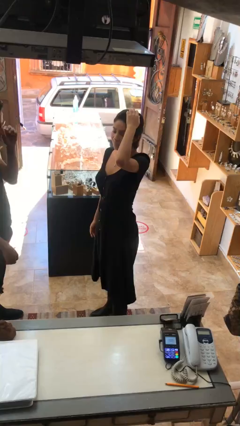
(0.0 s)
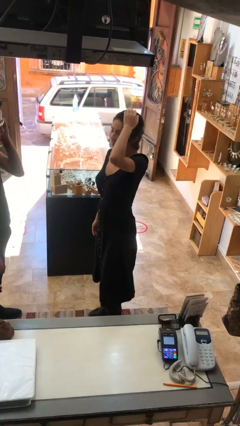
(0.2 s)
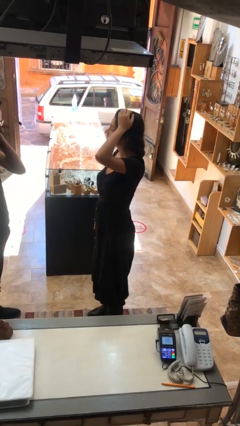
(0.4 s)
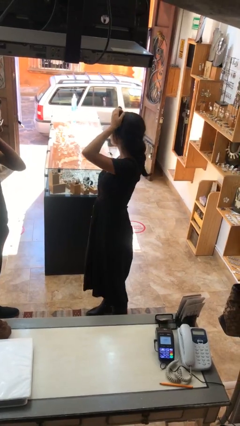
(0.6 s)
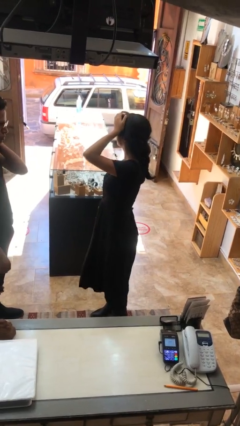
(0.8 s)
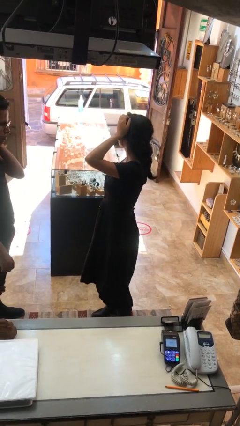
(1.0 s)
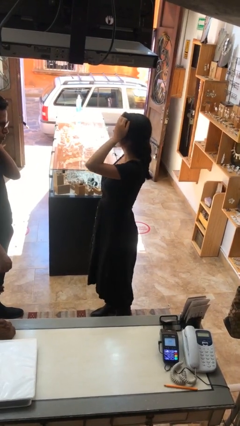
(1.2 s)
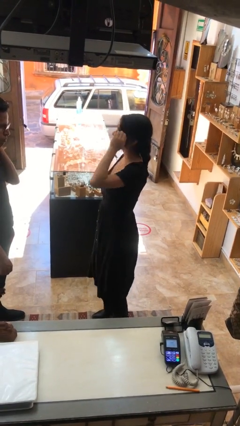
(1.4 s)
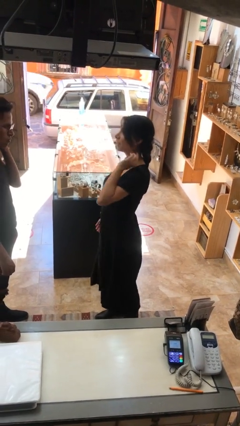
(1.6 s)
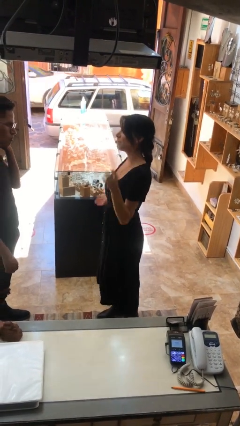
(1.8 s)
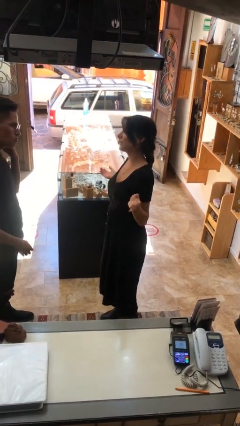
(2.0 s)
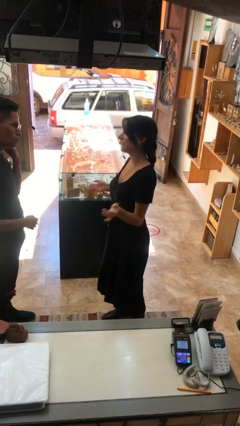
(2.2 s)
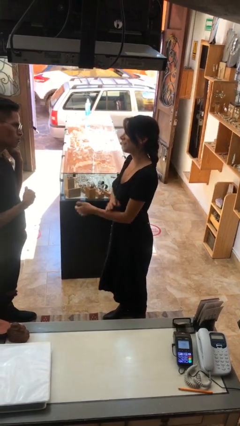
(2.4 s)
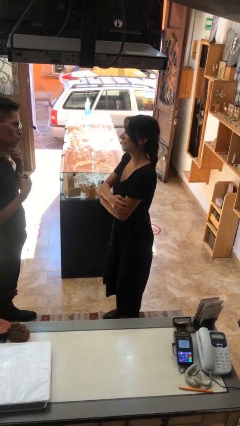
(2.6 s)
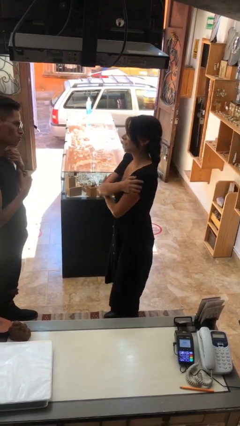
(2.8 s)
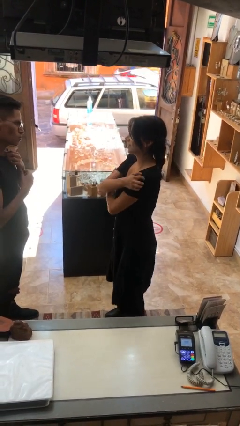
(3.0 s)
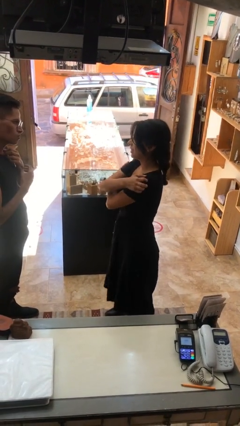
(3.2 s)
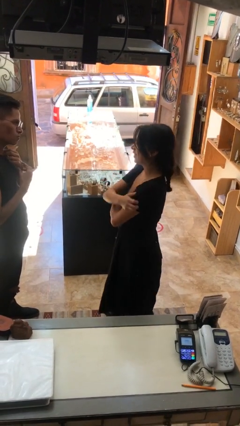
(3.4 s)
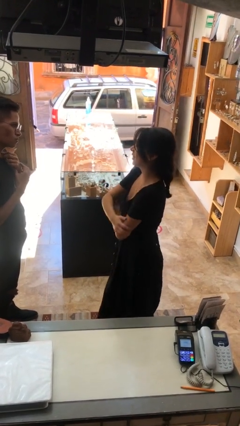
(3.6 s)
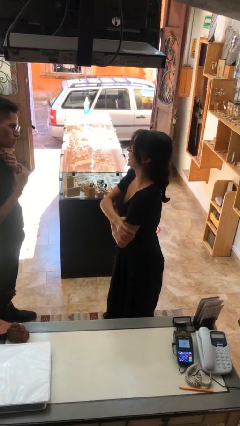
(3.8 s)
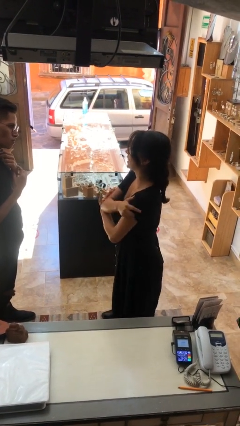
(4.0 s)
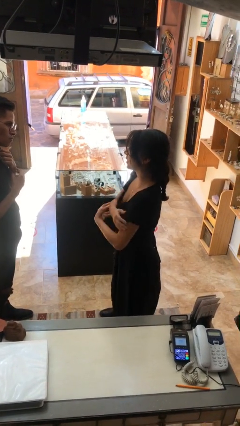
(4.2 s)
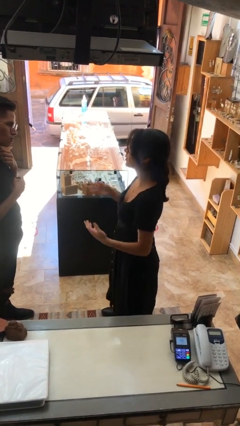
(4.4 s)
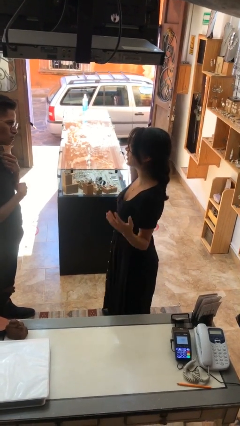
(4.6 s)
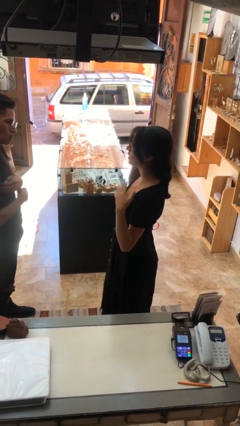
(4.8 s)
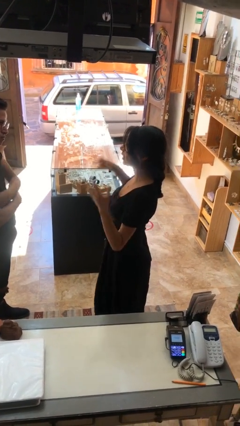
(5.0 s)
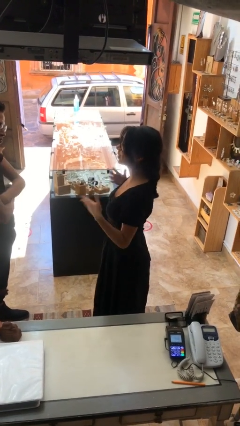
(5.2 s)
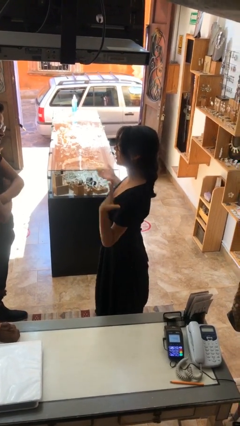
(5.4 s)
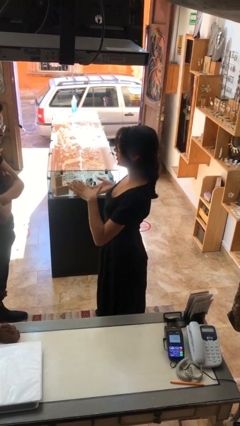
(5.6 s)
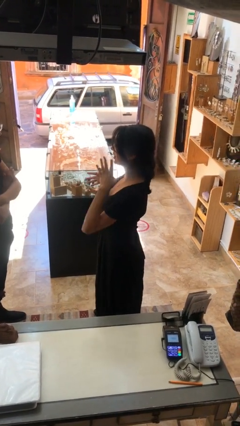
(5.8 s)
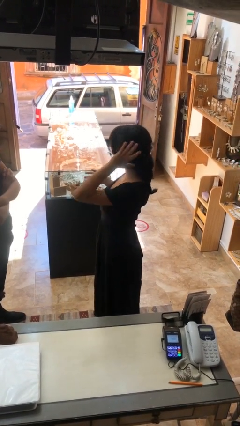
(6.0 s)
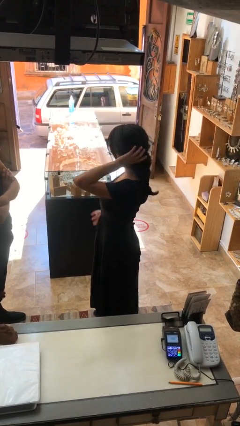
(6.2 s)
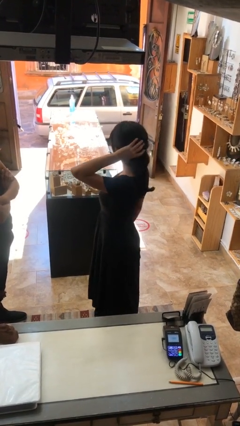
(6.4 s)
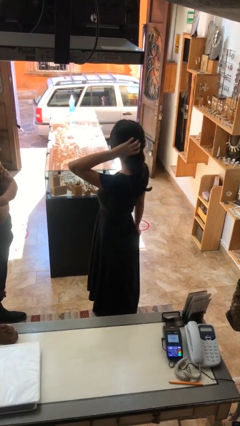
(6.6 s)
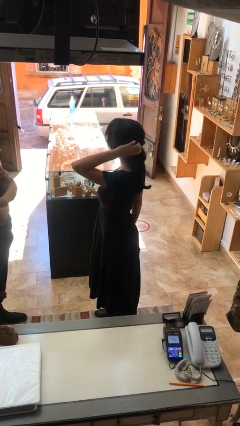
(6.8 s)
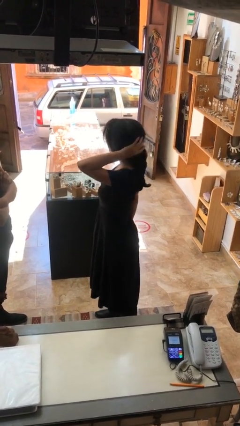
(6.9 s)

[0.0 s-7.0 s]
person talks to person

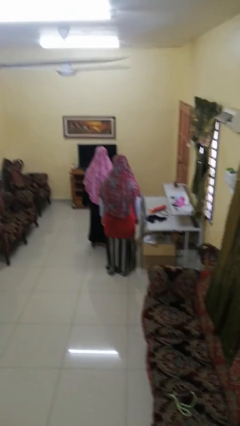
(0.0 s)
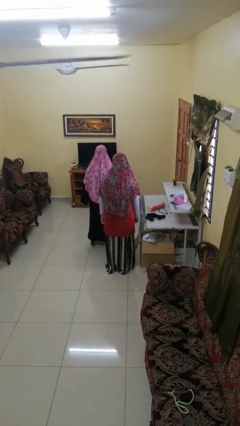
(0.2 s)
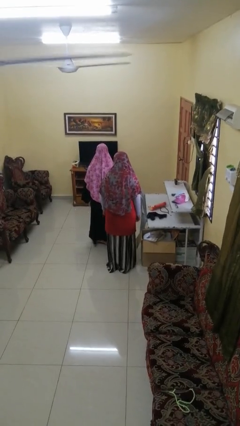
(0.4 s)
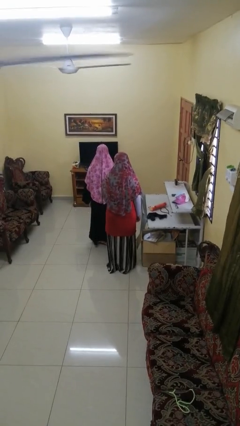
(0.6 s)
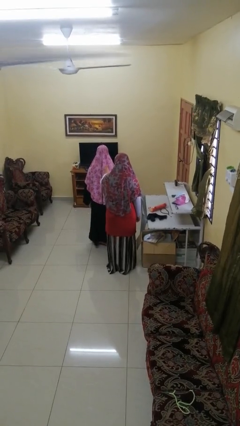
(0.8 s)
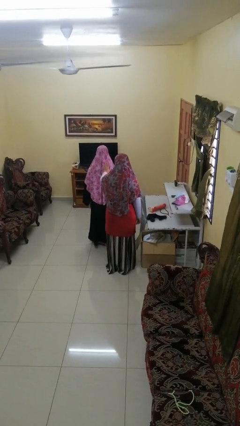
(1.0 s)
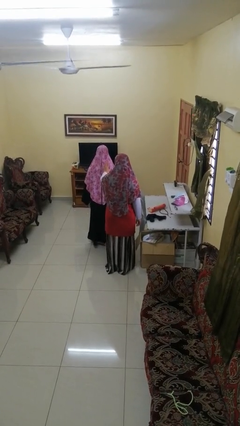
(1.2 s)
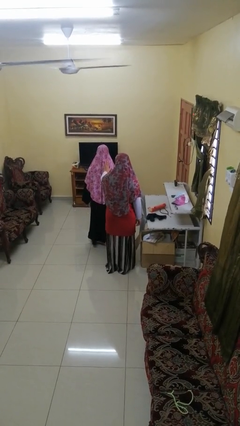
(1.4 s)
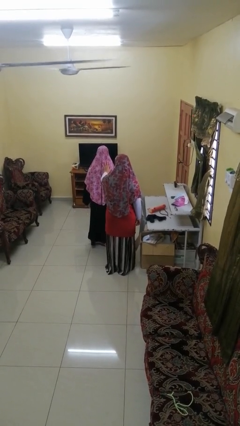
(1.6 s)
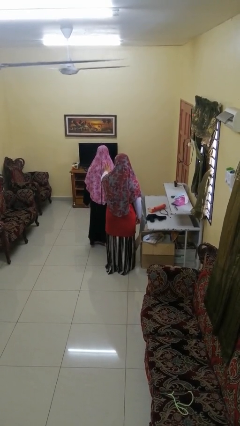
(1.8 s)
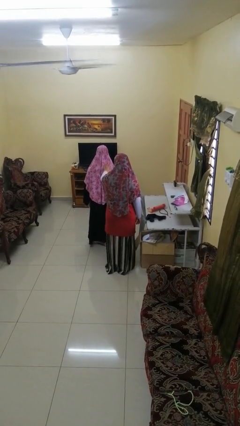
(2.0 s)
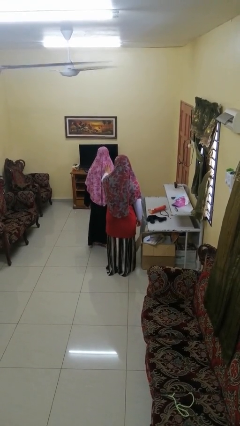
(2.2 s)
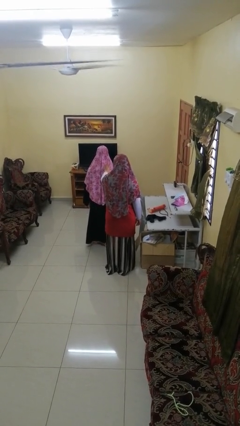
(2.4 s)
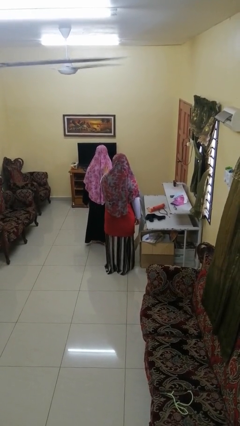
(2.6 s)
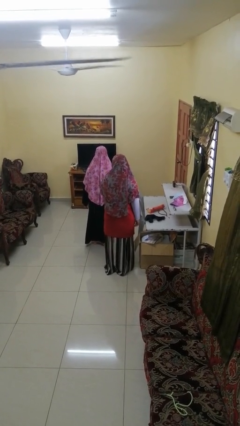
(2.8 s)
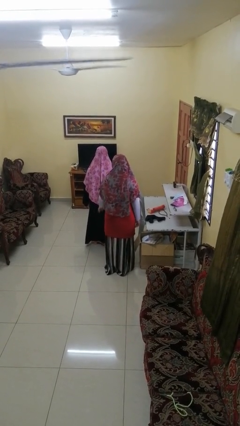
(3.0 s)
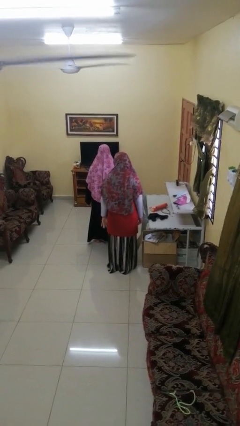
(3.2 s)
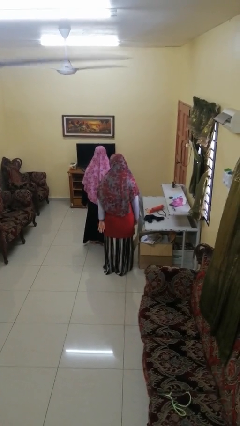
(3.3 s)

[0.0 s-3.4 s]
person touches back of person

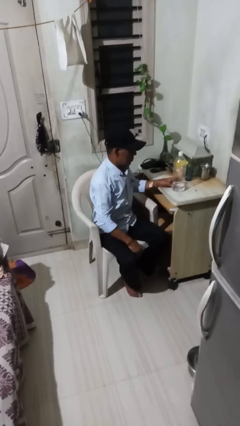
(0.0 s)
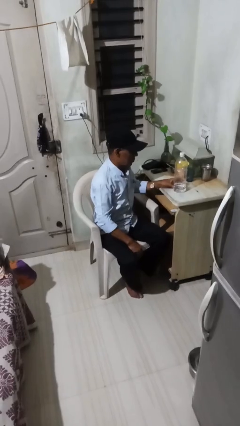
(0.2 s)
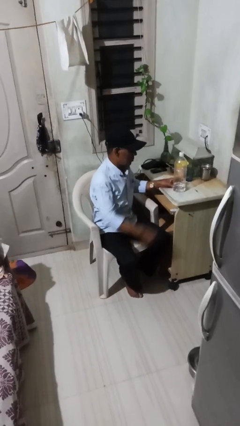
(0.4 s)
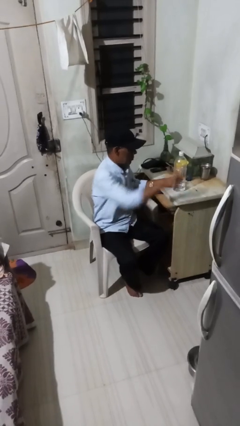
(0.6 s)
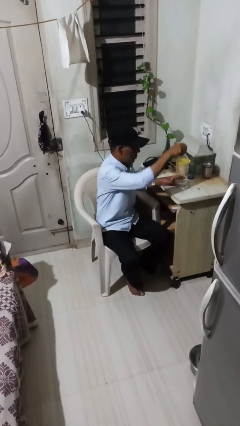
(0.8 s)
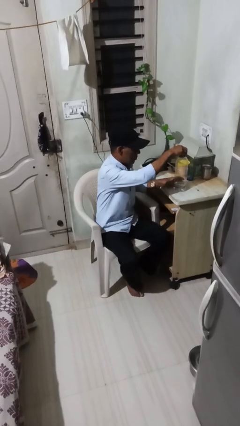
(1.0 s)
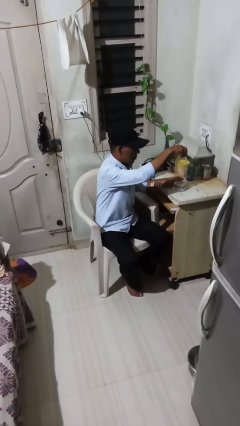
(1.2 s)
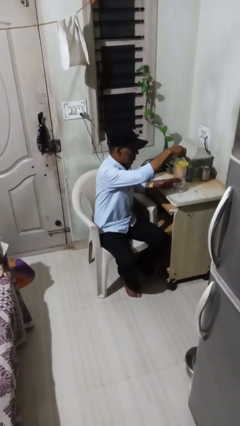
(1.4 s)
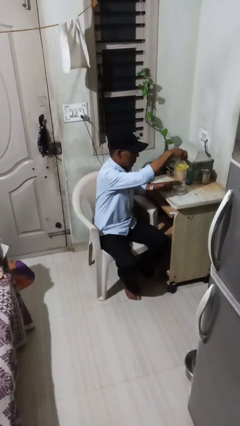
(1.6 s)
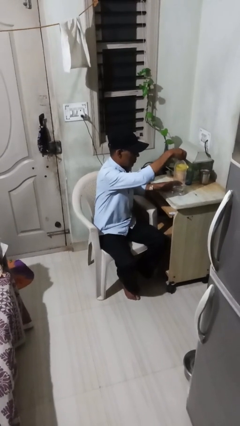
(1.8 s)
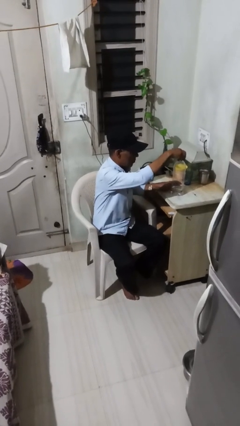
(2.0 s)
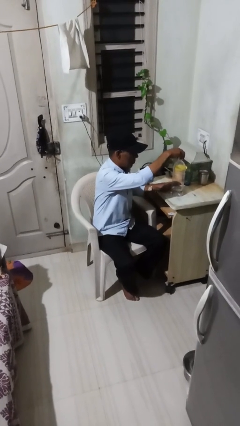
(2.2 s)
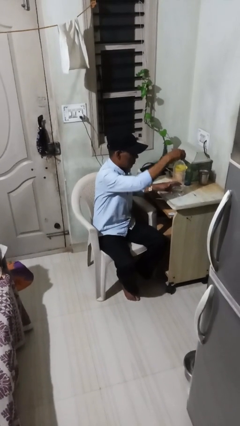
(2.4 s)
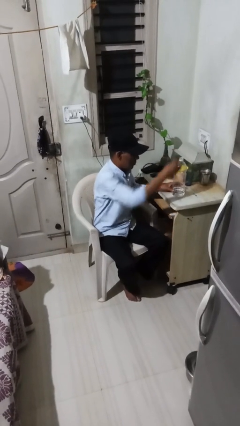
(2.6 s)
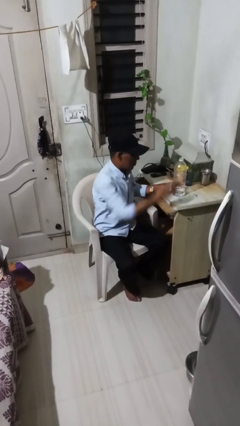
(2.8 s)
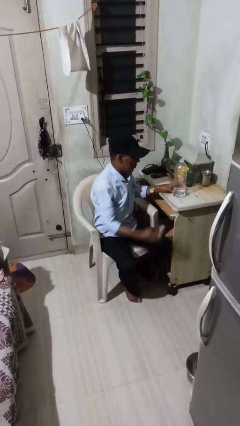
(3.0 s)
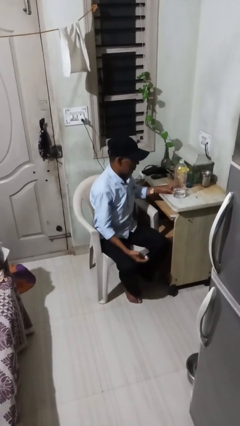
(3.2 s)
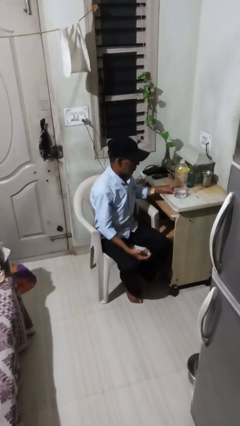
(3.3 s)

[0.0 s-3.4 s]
person unscrews lid from bottle

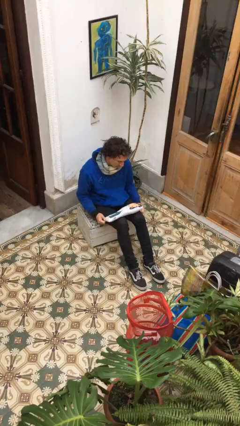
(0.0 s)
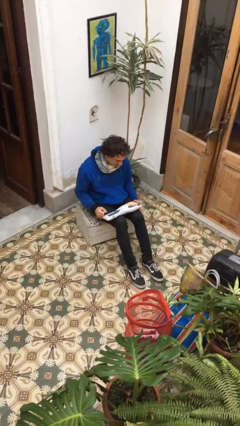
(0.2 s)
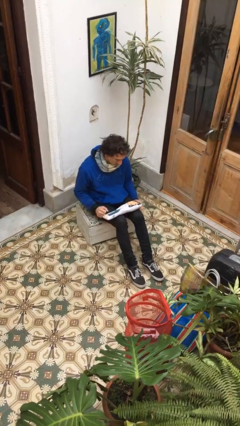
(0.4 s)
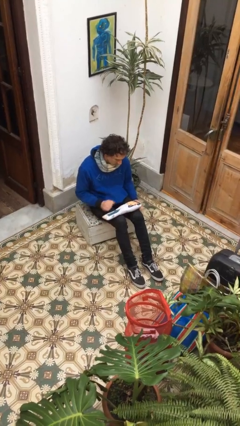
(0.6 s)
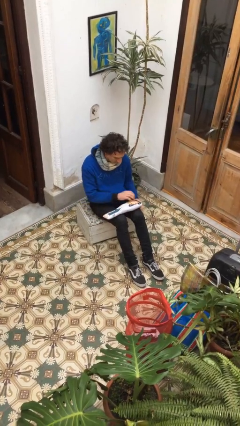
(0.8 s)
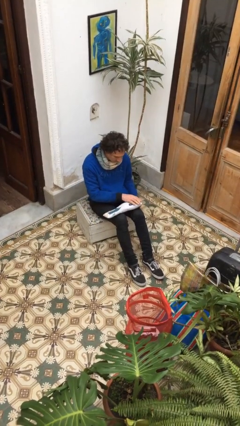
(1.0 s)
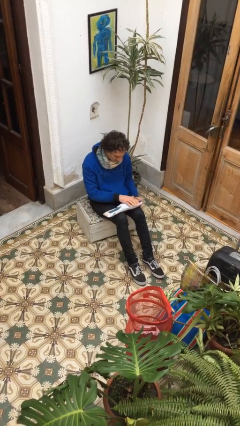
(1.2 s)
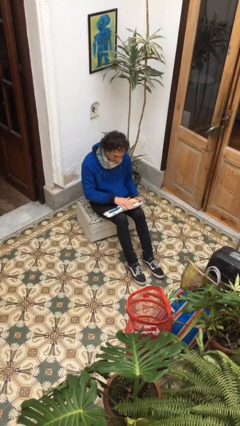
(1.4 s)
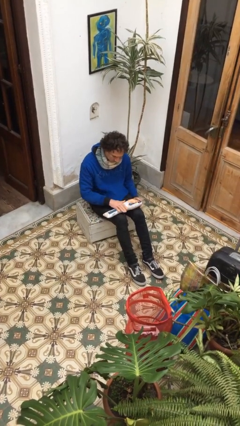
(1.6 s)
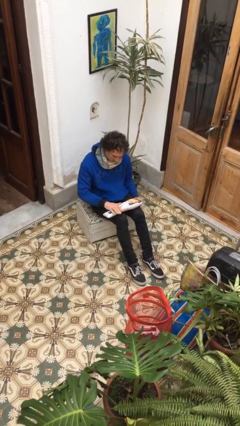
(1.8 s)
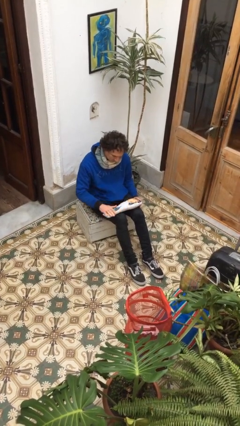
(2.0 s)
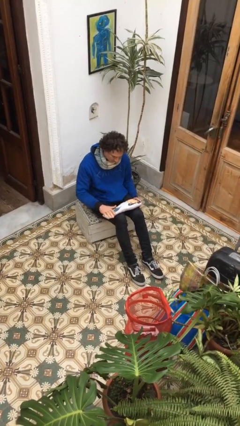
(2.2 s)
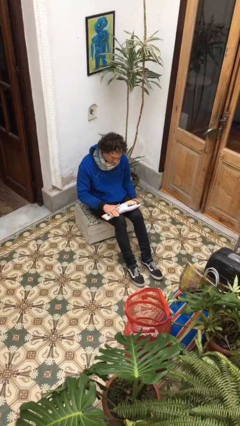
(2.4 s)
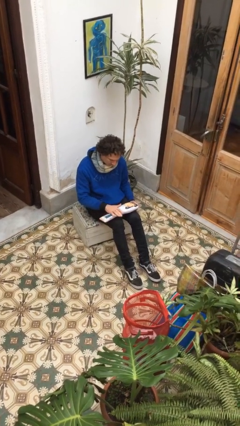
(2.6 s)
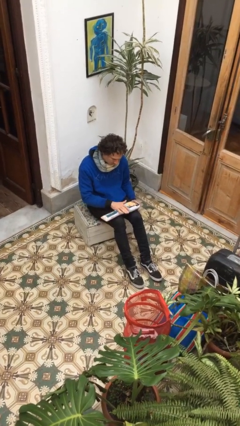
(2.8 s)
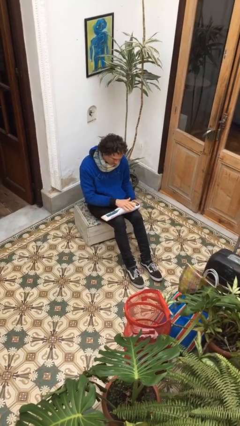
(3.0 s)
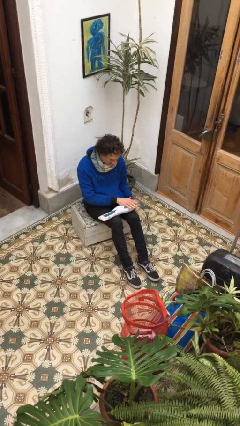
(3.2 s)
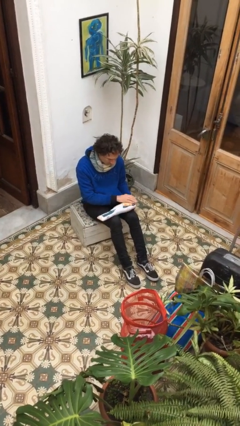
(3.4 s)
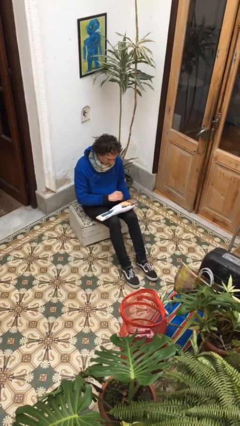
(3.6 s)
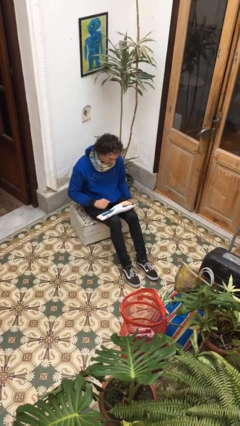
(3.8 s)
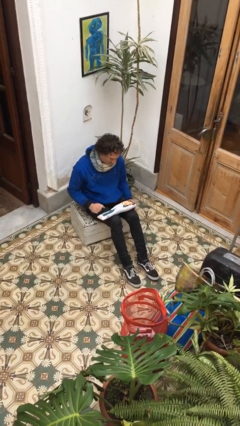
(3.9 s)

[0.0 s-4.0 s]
person waves hand over object

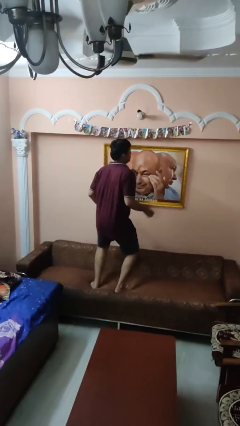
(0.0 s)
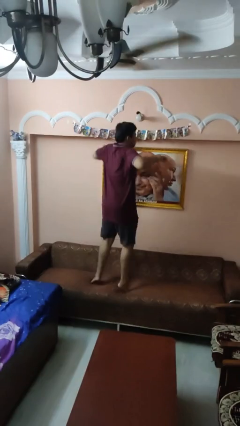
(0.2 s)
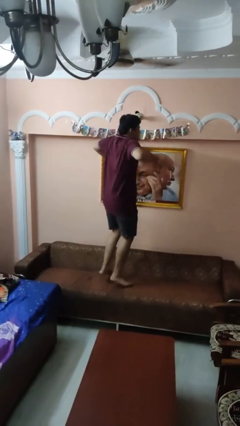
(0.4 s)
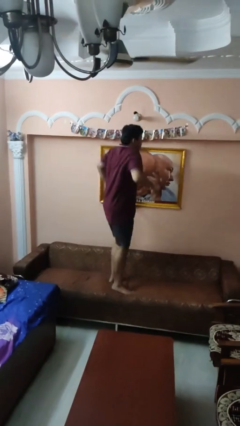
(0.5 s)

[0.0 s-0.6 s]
person jumps on couch
